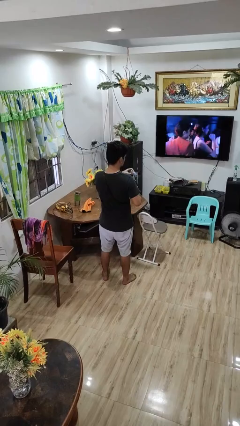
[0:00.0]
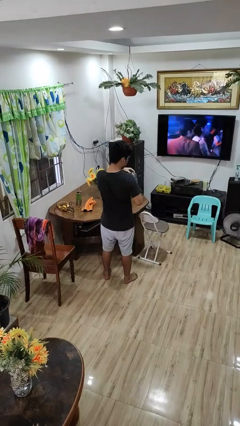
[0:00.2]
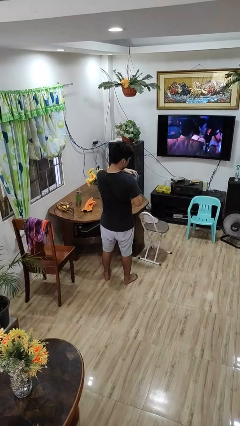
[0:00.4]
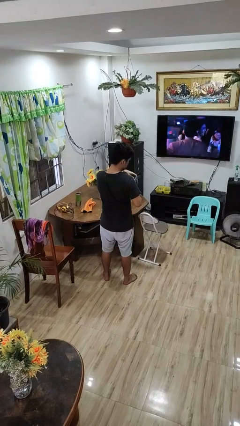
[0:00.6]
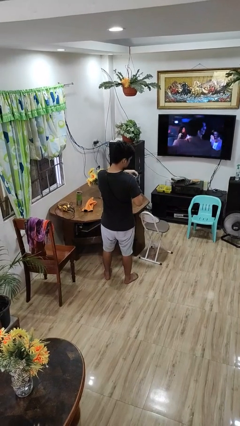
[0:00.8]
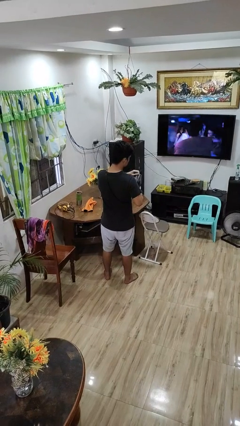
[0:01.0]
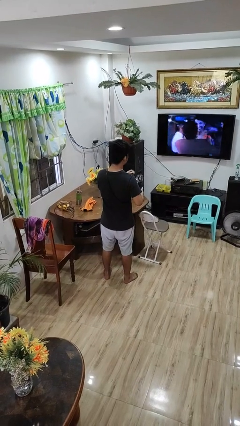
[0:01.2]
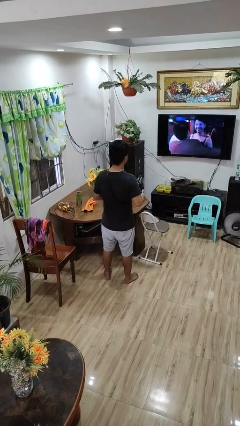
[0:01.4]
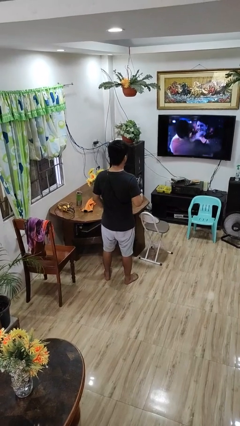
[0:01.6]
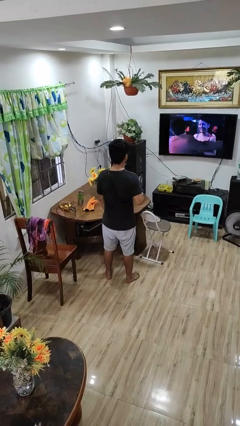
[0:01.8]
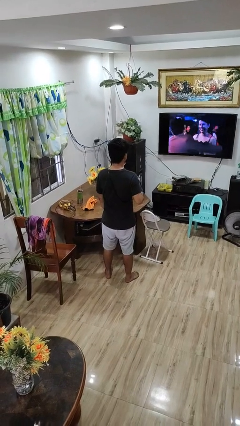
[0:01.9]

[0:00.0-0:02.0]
person puts object into purse

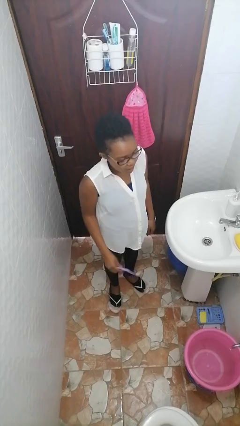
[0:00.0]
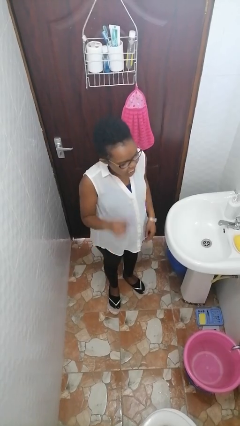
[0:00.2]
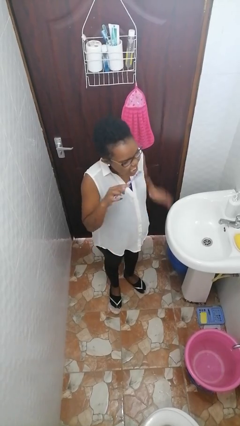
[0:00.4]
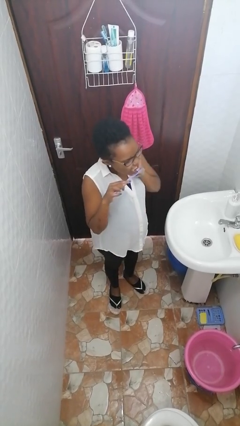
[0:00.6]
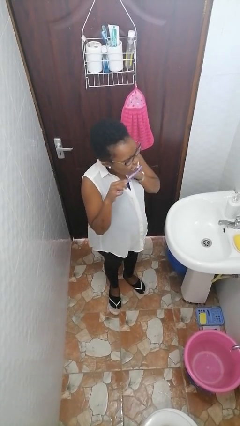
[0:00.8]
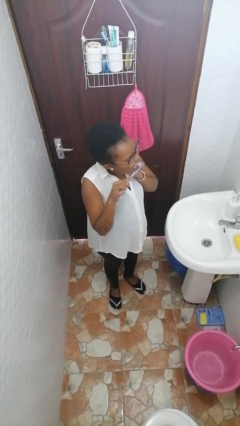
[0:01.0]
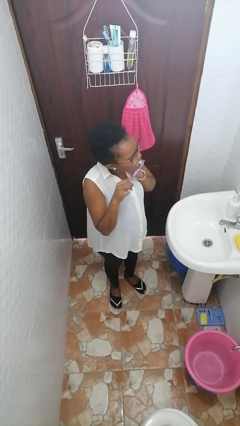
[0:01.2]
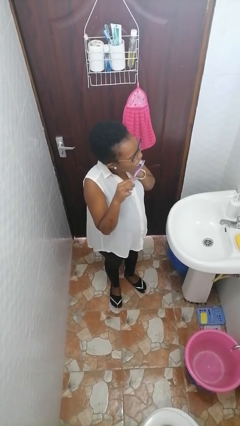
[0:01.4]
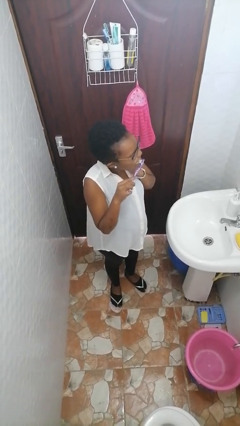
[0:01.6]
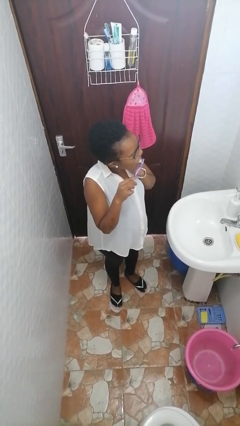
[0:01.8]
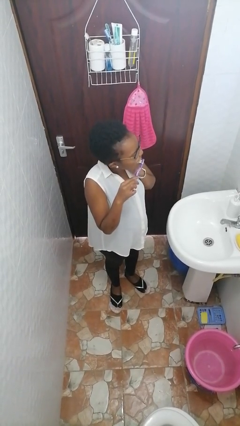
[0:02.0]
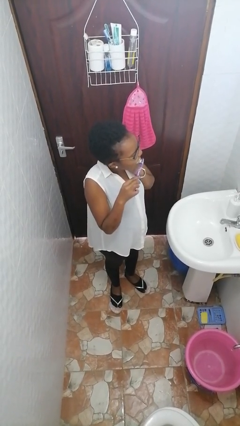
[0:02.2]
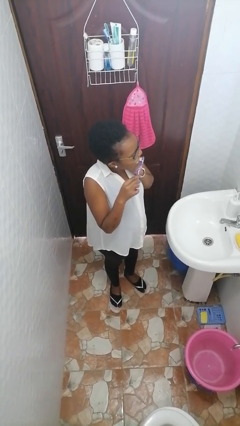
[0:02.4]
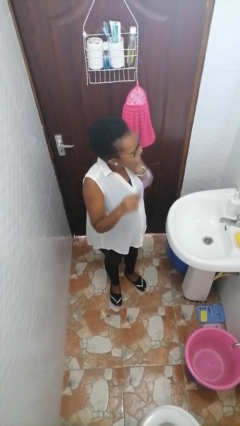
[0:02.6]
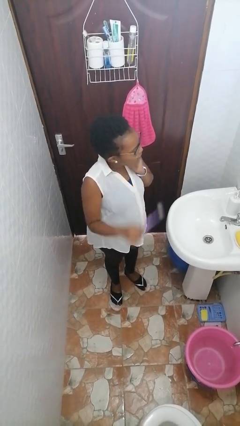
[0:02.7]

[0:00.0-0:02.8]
person brushes teeth

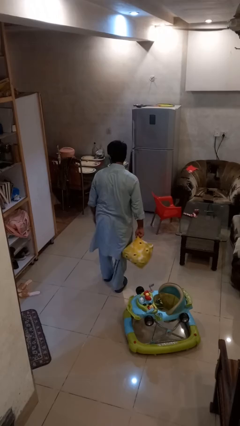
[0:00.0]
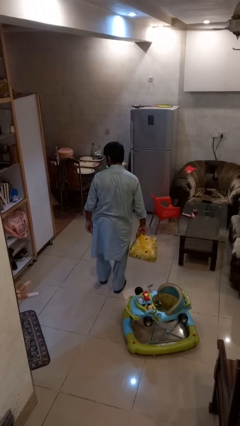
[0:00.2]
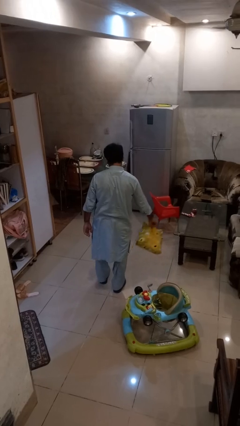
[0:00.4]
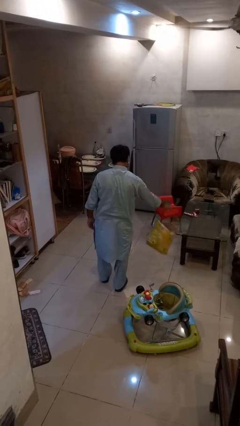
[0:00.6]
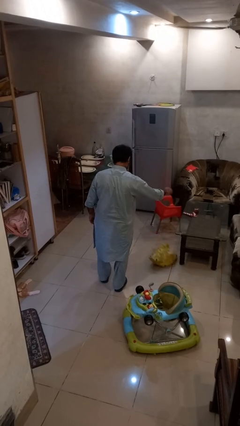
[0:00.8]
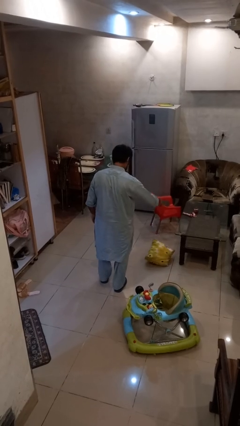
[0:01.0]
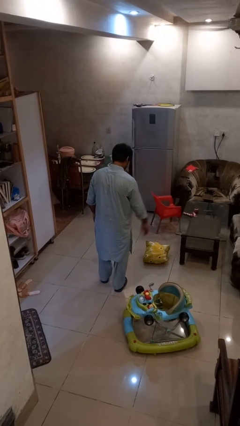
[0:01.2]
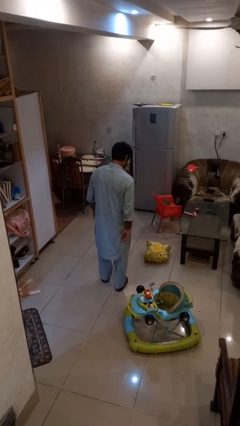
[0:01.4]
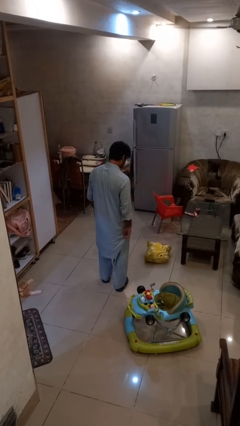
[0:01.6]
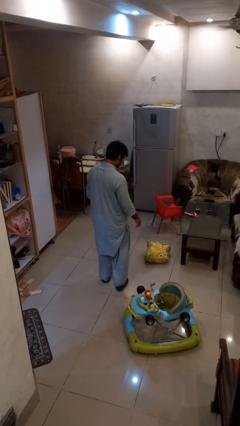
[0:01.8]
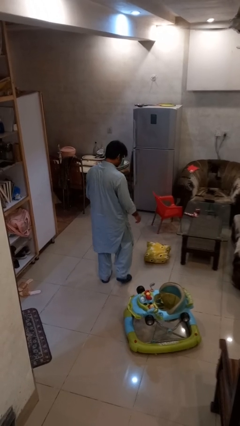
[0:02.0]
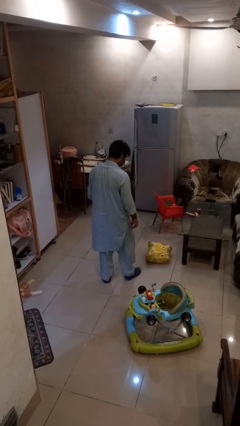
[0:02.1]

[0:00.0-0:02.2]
person throws object to ground

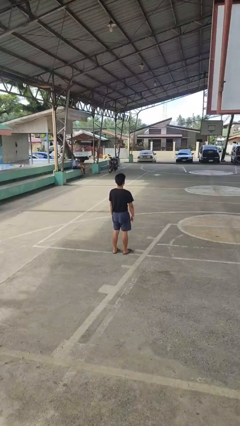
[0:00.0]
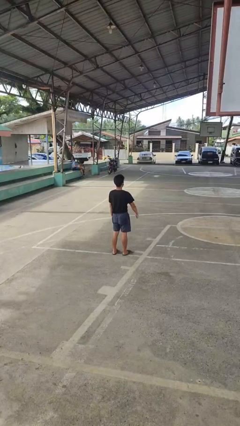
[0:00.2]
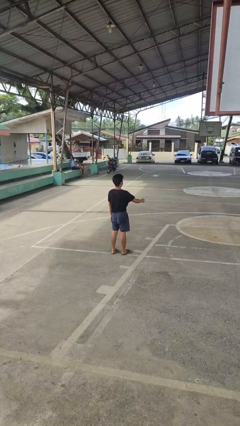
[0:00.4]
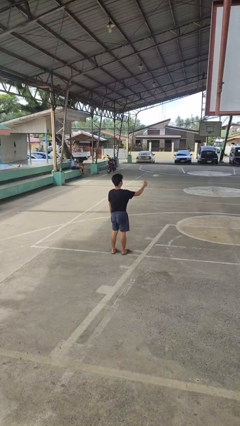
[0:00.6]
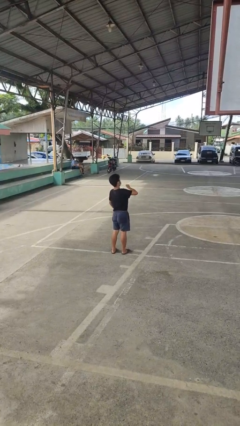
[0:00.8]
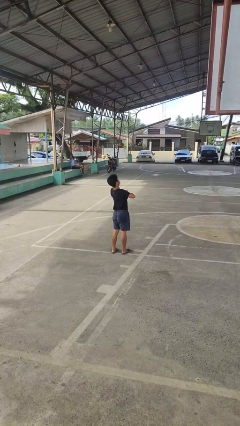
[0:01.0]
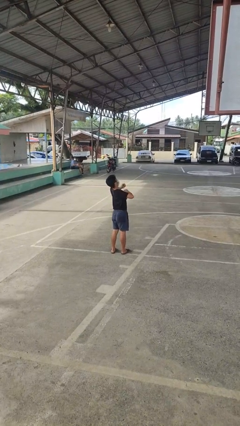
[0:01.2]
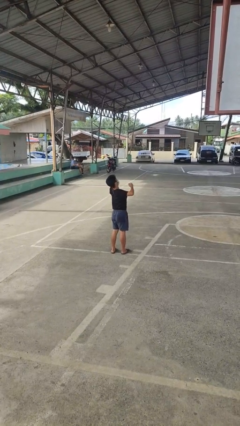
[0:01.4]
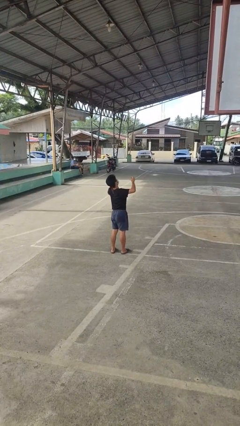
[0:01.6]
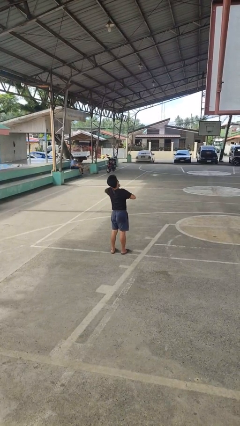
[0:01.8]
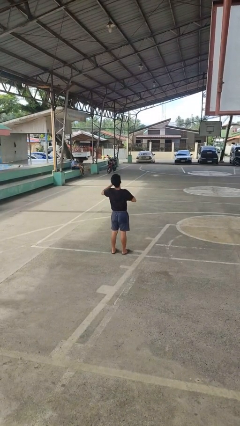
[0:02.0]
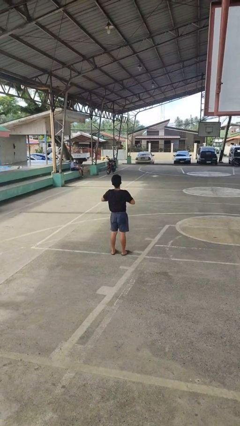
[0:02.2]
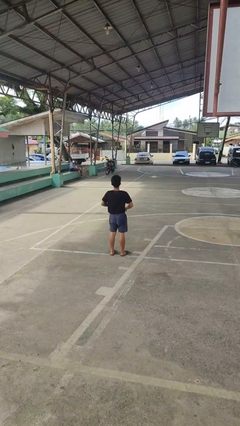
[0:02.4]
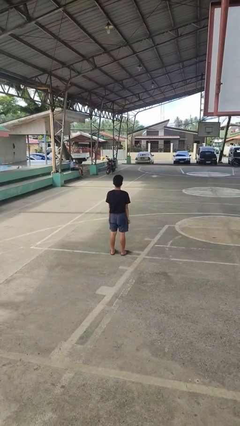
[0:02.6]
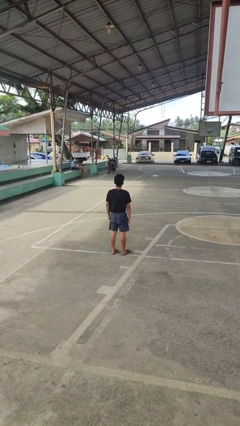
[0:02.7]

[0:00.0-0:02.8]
person drums on chest

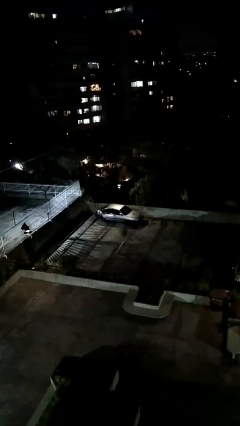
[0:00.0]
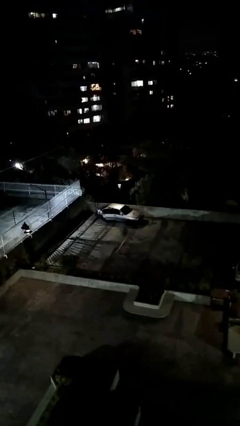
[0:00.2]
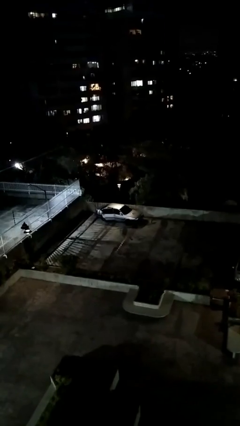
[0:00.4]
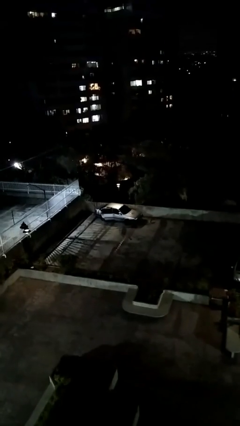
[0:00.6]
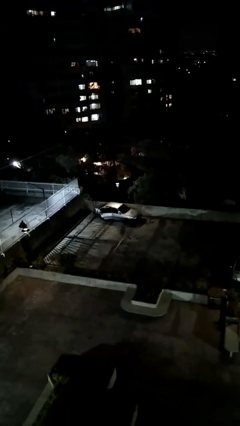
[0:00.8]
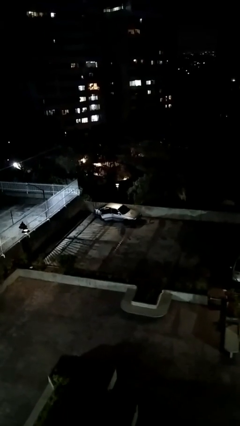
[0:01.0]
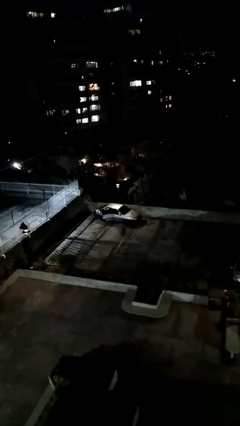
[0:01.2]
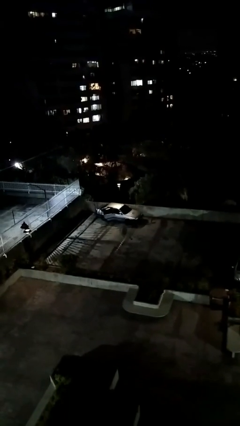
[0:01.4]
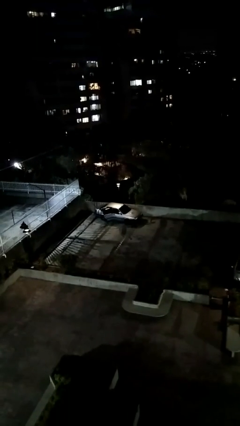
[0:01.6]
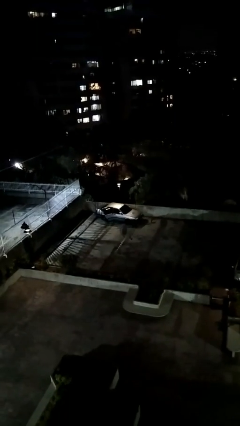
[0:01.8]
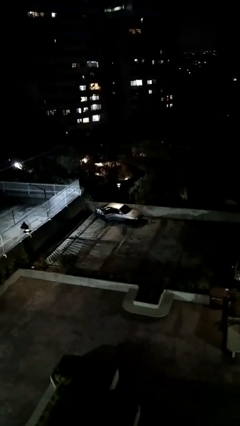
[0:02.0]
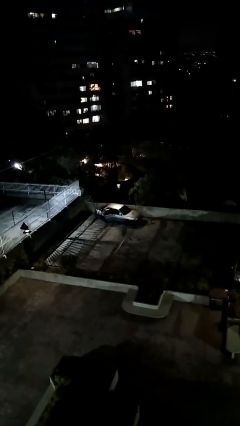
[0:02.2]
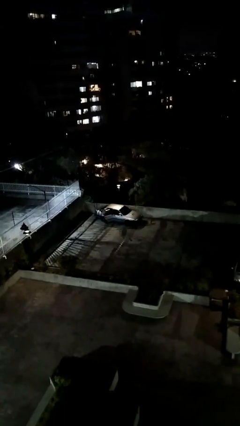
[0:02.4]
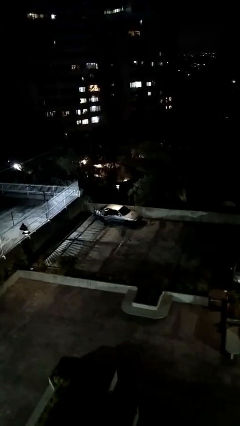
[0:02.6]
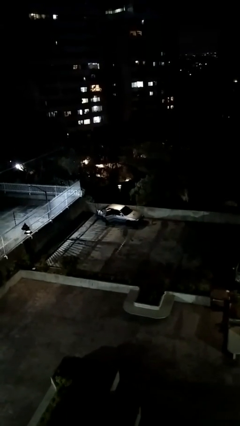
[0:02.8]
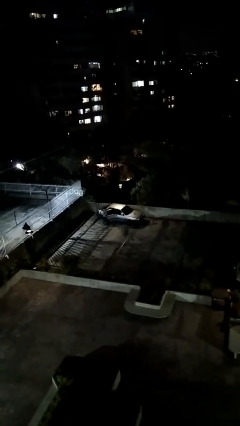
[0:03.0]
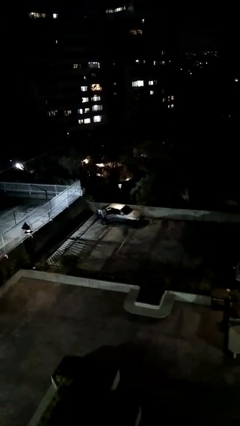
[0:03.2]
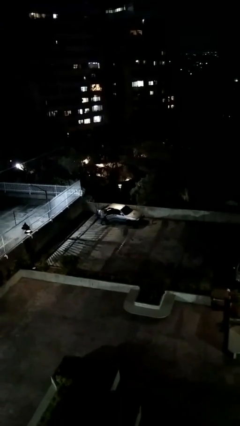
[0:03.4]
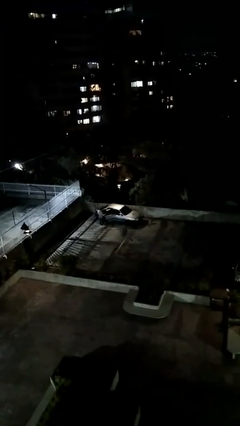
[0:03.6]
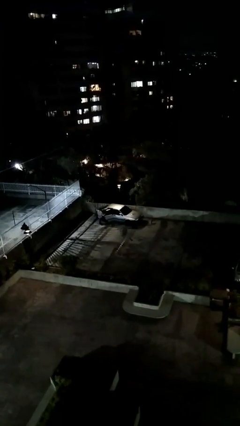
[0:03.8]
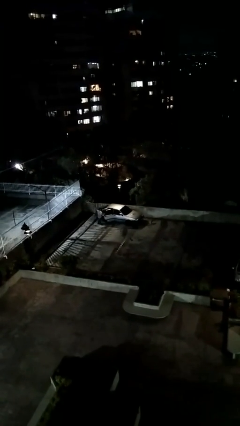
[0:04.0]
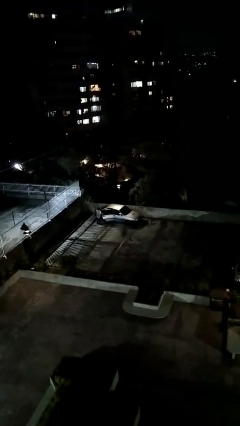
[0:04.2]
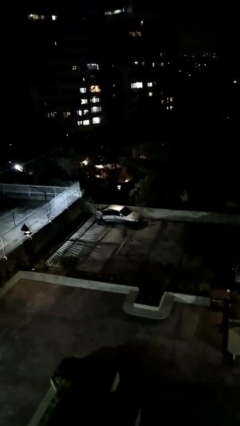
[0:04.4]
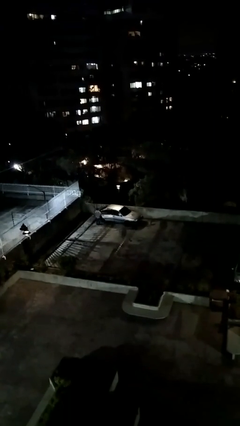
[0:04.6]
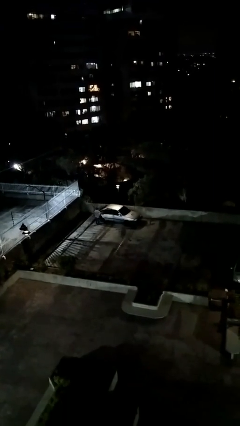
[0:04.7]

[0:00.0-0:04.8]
car drops off person

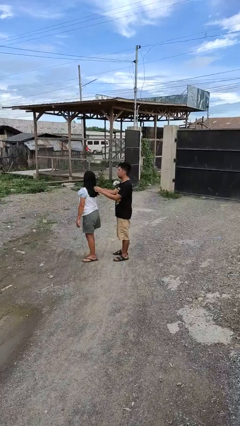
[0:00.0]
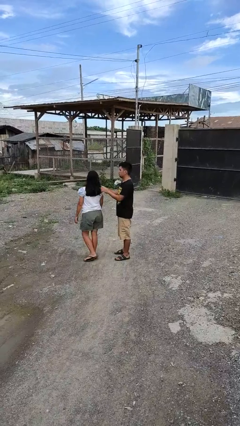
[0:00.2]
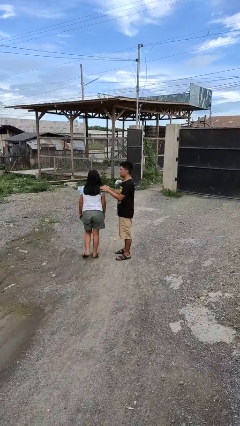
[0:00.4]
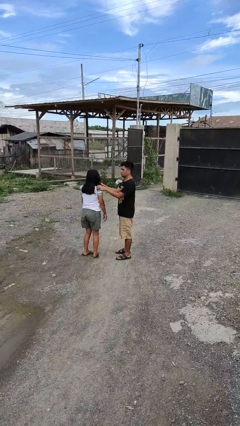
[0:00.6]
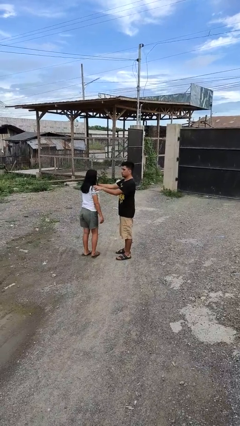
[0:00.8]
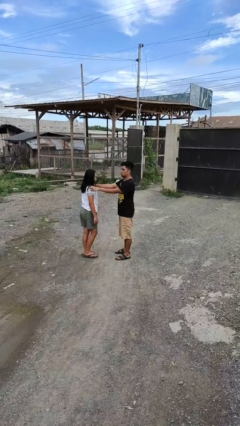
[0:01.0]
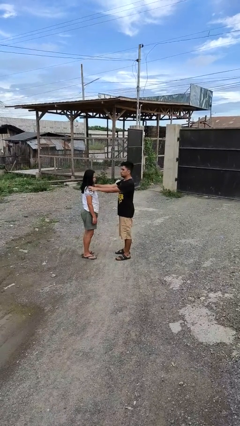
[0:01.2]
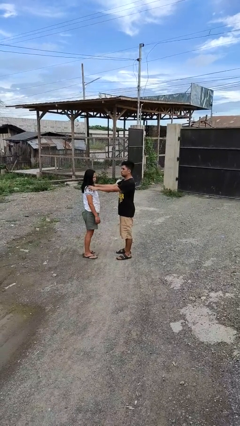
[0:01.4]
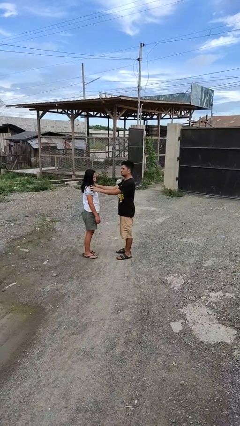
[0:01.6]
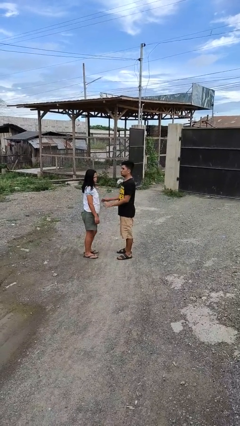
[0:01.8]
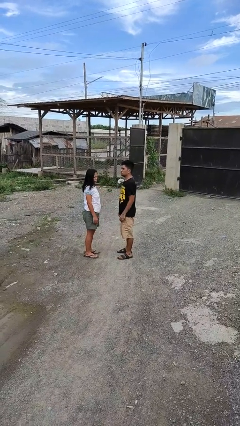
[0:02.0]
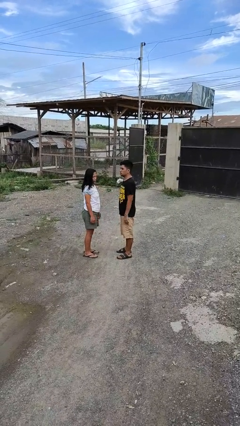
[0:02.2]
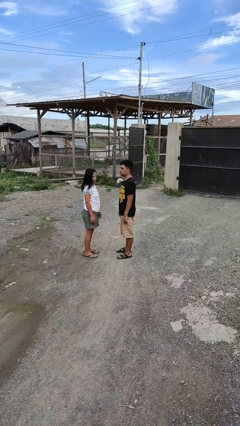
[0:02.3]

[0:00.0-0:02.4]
person spins person around

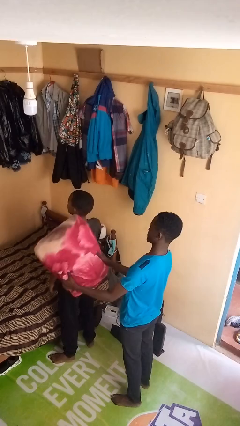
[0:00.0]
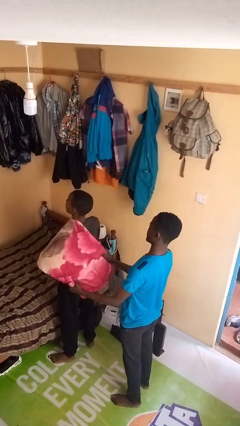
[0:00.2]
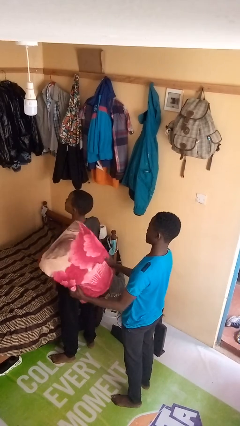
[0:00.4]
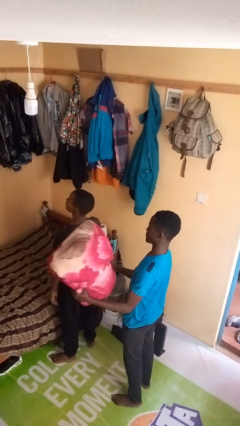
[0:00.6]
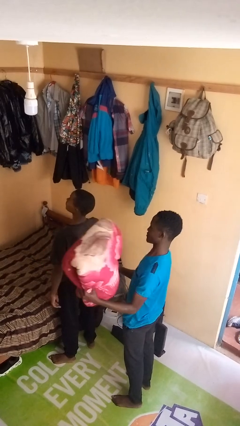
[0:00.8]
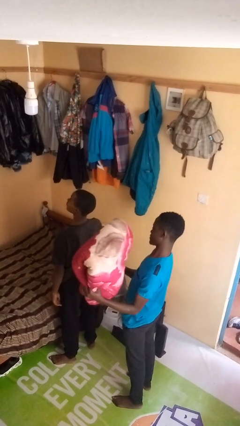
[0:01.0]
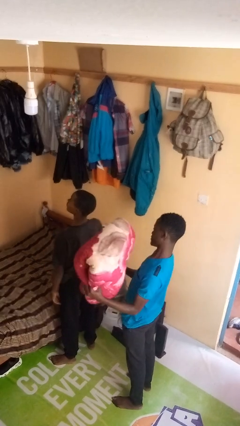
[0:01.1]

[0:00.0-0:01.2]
person hits person with pillow
